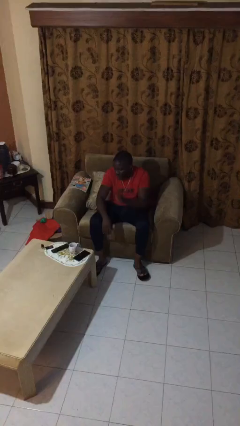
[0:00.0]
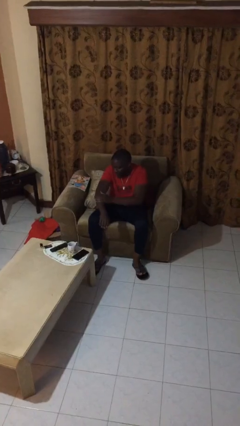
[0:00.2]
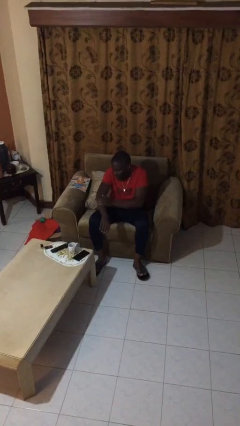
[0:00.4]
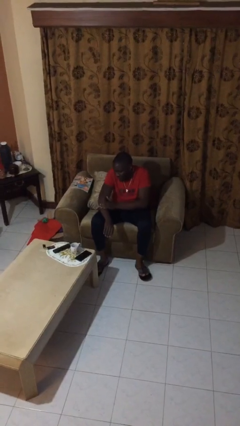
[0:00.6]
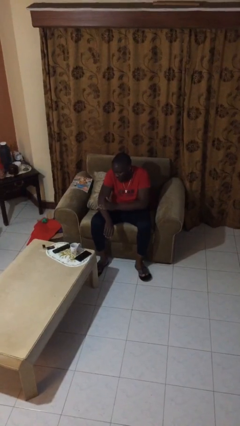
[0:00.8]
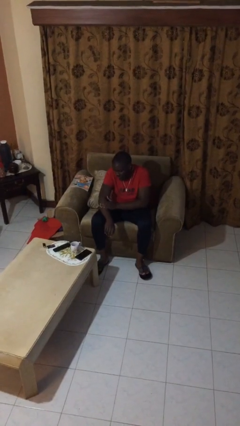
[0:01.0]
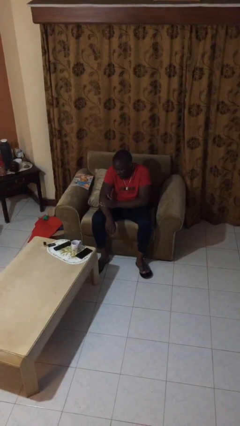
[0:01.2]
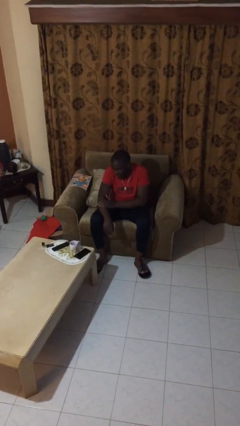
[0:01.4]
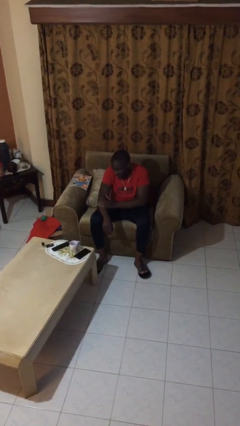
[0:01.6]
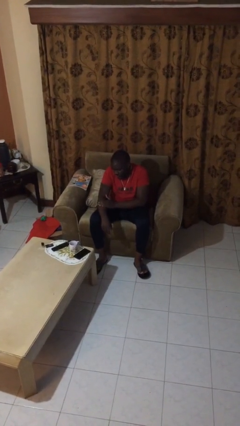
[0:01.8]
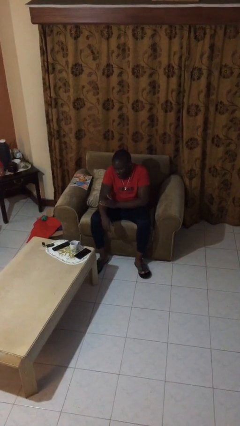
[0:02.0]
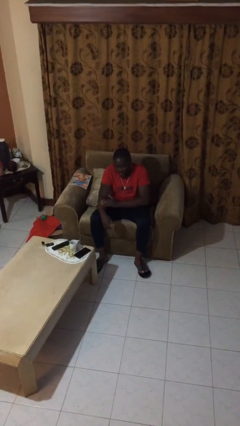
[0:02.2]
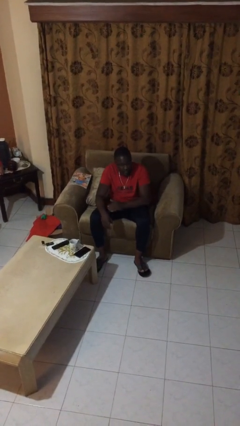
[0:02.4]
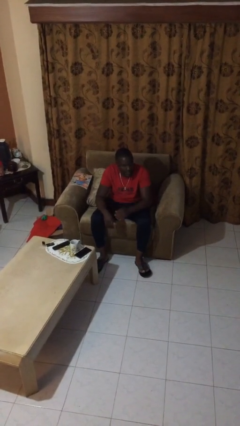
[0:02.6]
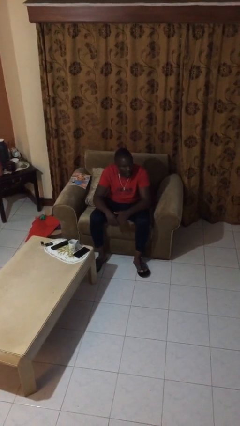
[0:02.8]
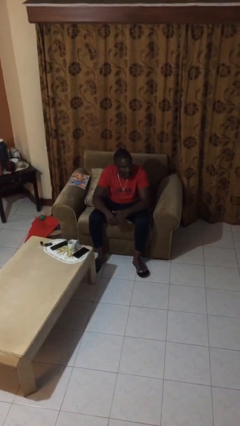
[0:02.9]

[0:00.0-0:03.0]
person swats bug

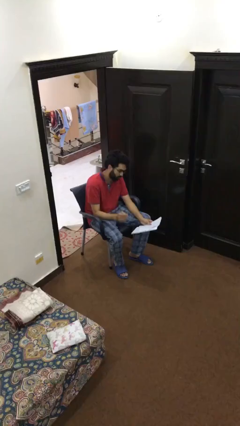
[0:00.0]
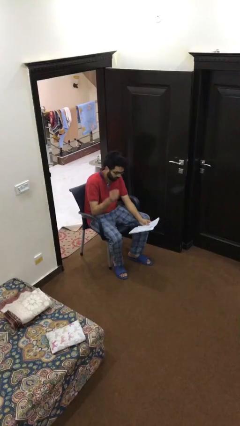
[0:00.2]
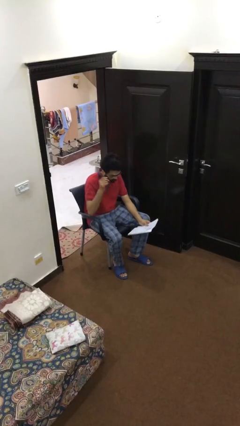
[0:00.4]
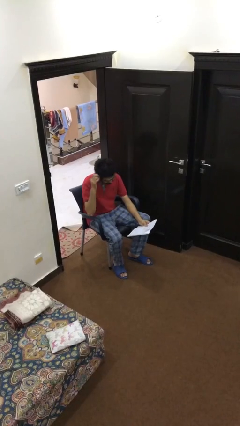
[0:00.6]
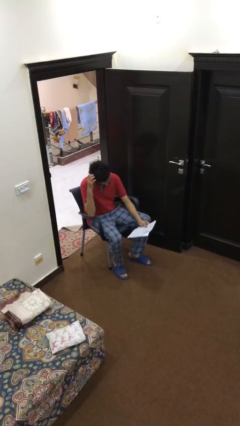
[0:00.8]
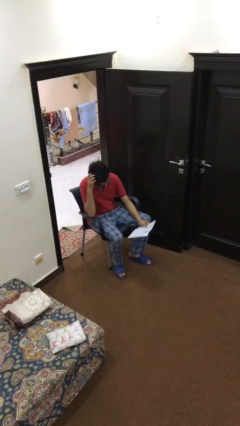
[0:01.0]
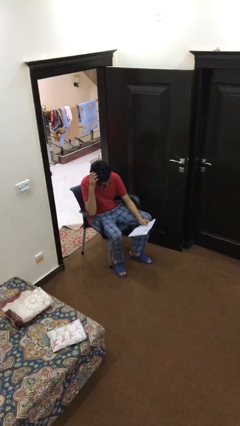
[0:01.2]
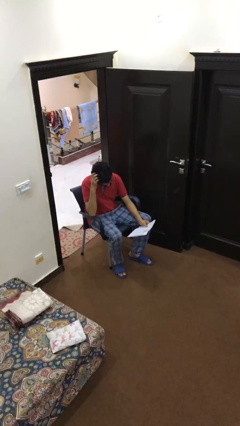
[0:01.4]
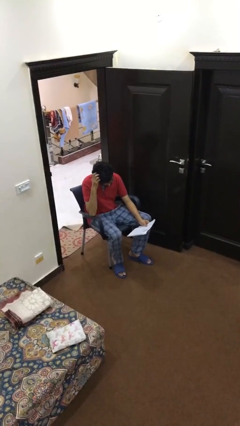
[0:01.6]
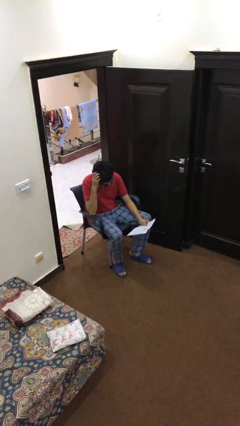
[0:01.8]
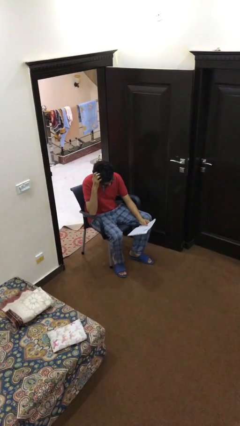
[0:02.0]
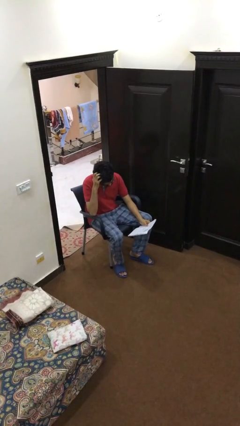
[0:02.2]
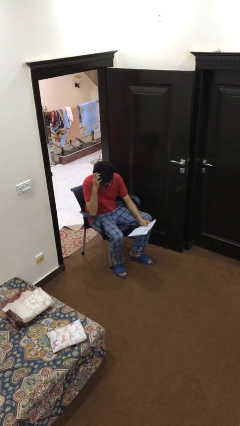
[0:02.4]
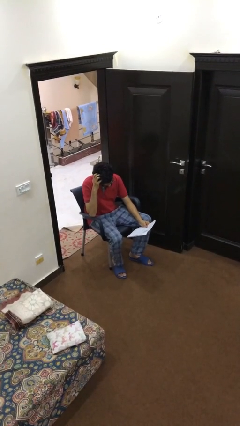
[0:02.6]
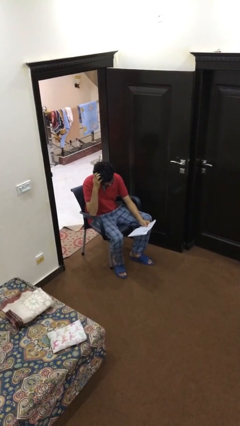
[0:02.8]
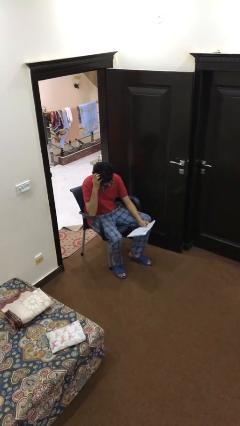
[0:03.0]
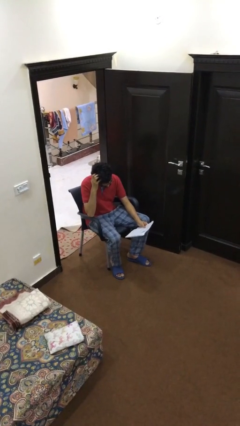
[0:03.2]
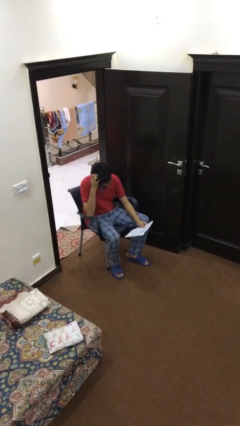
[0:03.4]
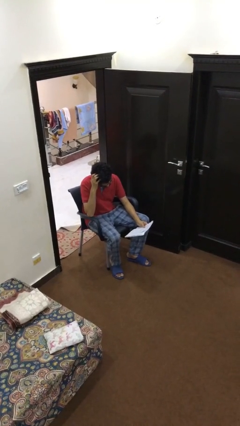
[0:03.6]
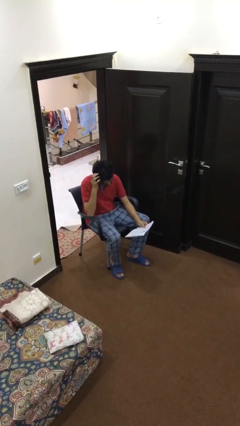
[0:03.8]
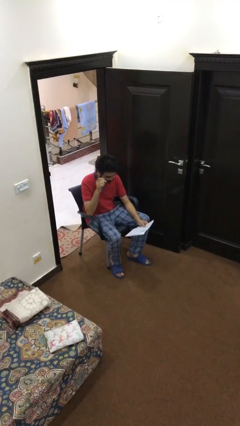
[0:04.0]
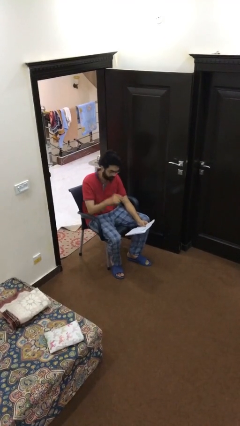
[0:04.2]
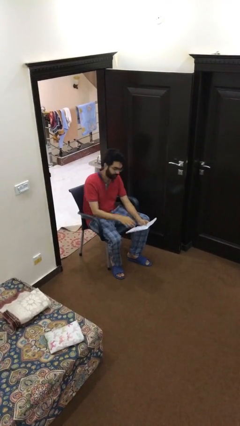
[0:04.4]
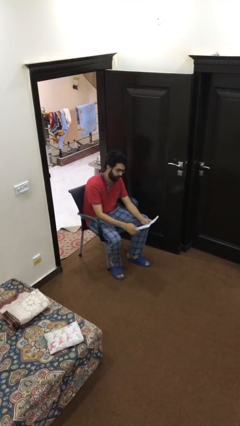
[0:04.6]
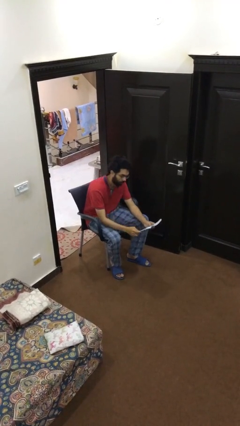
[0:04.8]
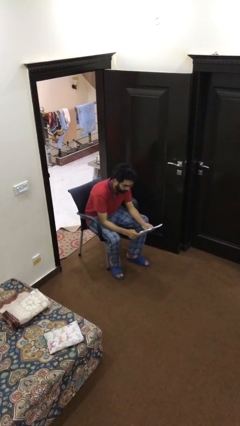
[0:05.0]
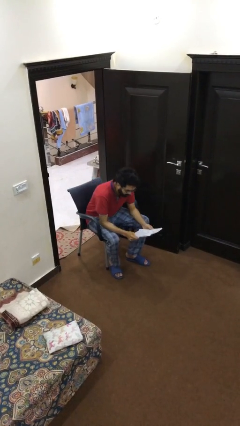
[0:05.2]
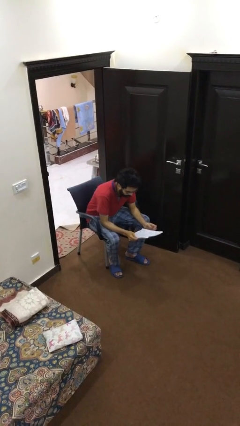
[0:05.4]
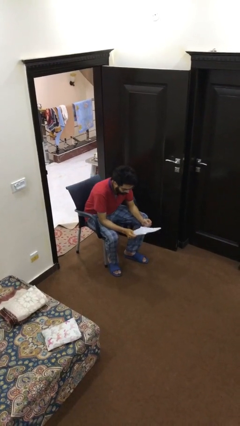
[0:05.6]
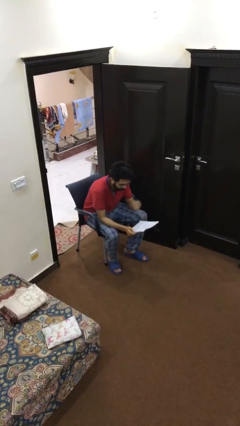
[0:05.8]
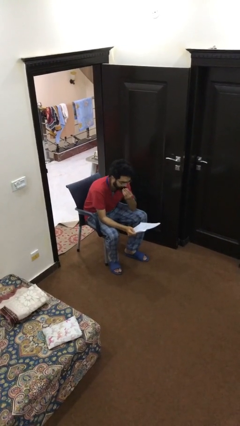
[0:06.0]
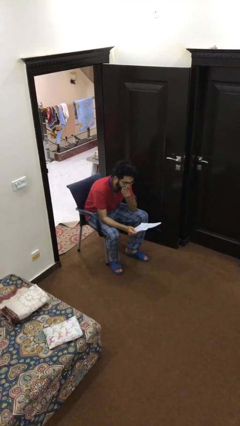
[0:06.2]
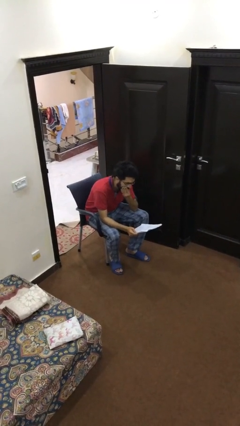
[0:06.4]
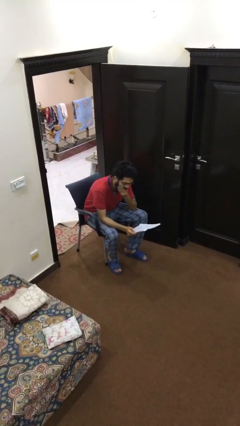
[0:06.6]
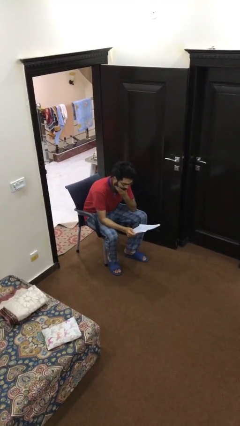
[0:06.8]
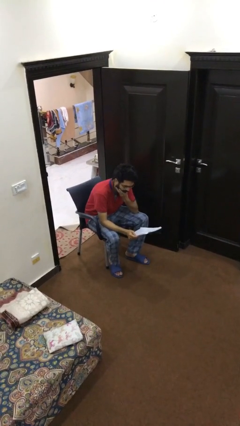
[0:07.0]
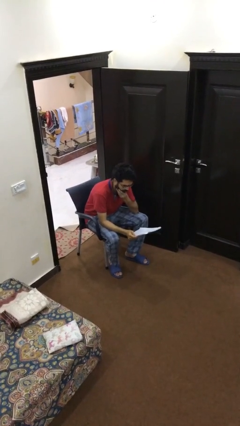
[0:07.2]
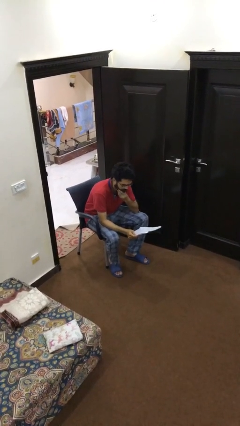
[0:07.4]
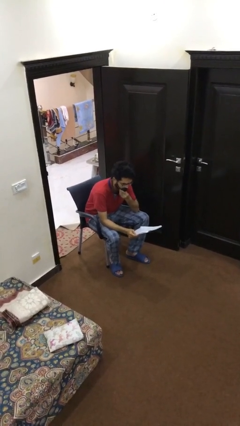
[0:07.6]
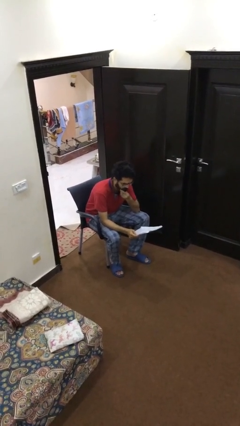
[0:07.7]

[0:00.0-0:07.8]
person reads document

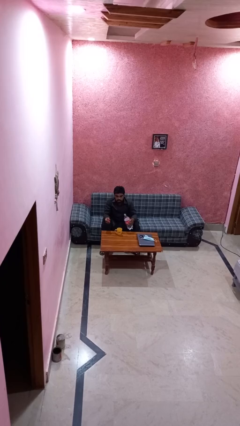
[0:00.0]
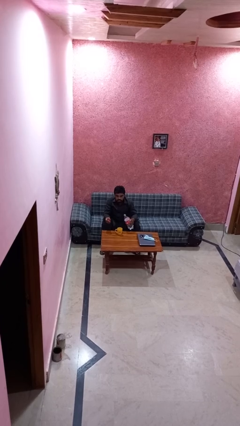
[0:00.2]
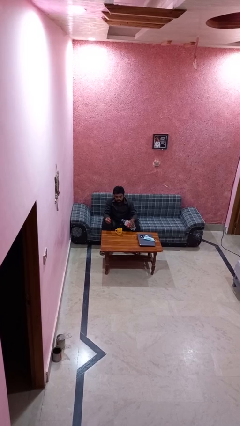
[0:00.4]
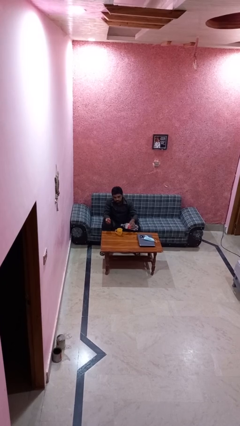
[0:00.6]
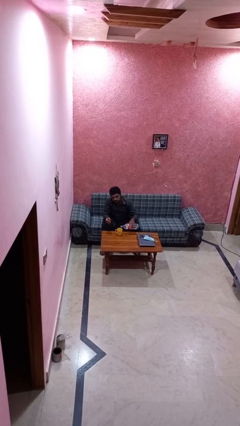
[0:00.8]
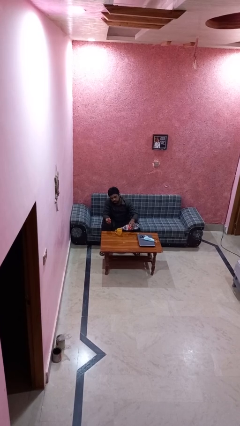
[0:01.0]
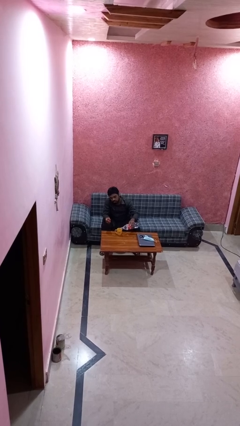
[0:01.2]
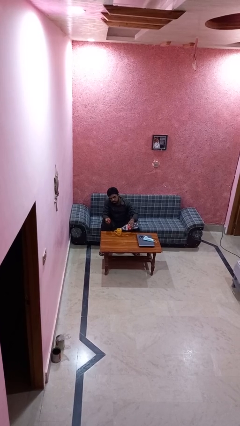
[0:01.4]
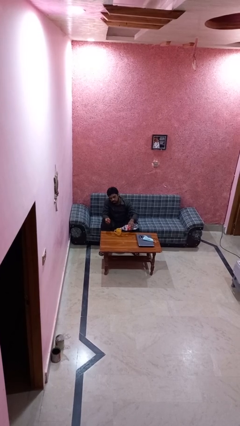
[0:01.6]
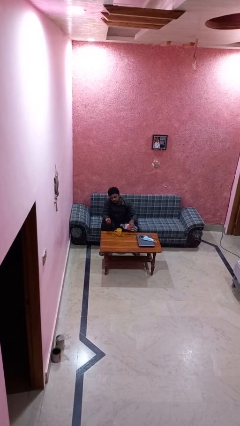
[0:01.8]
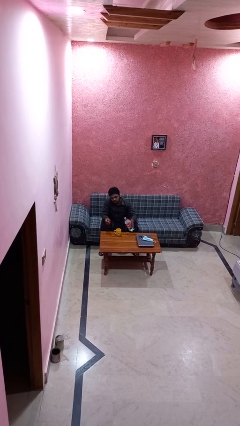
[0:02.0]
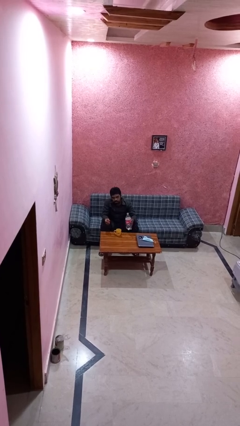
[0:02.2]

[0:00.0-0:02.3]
person pours liquid into cup

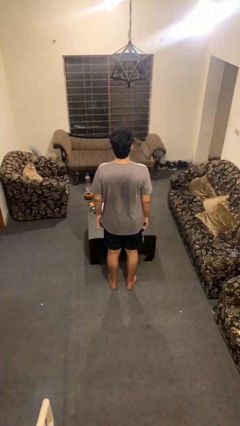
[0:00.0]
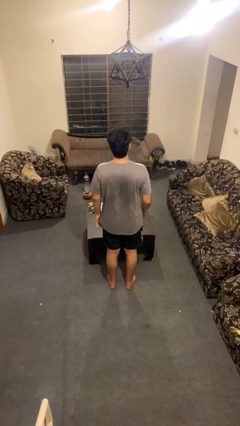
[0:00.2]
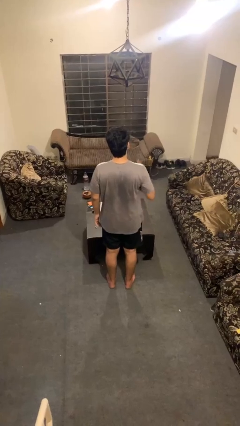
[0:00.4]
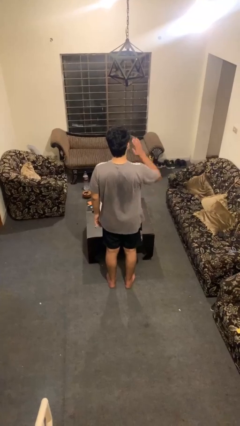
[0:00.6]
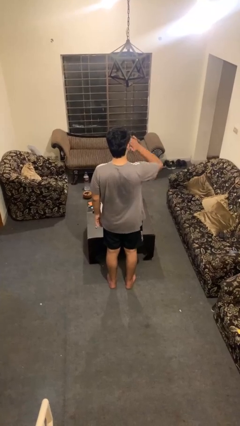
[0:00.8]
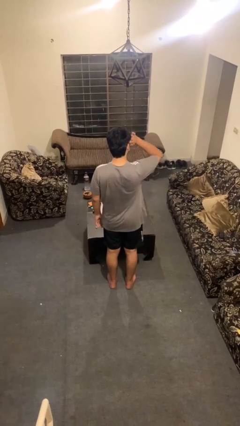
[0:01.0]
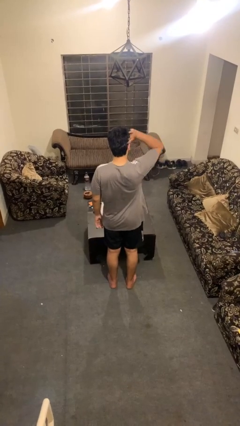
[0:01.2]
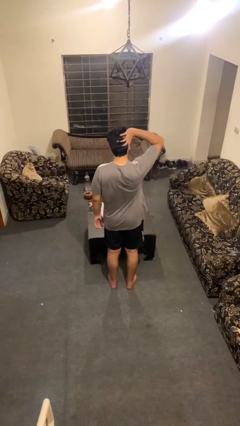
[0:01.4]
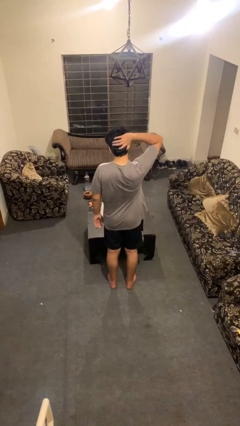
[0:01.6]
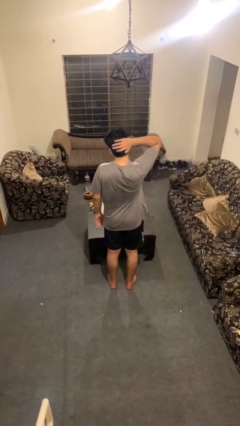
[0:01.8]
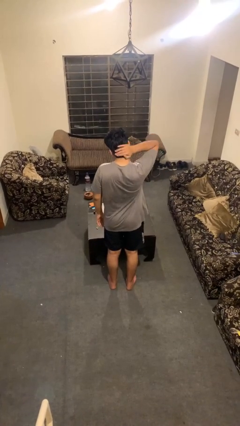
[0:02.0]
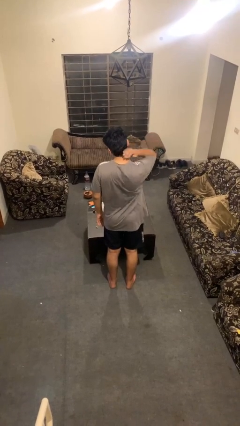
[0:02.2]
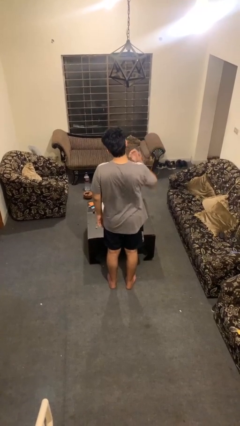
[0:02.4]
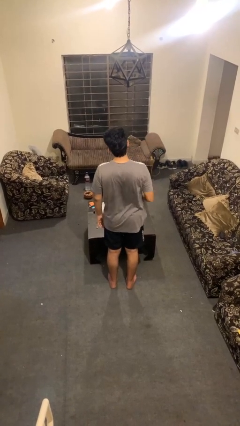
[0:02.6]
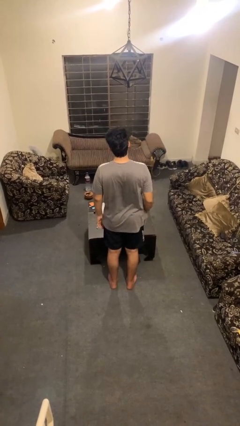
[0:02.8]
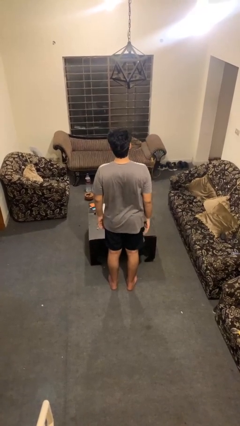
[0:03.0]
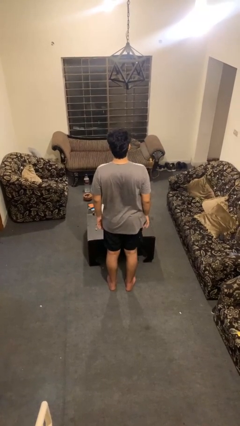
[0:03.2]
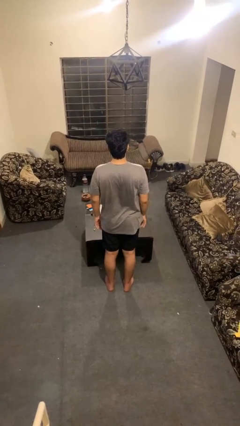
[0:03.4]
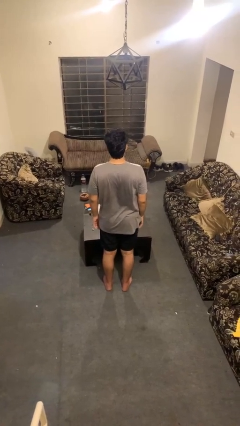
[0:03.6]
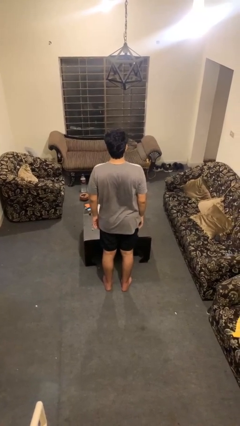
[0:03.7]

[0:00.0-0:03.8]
person strokes hair

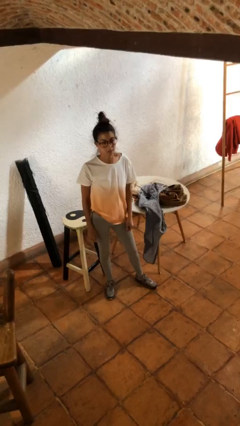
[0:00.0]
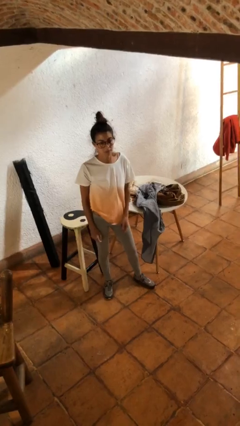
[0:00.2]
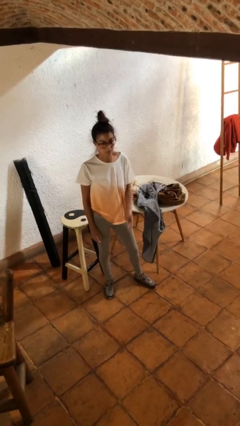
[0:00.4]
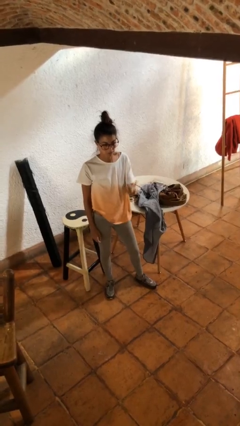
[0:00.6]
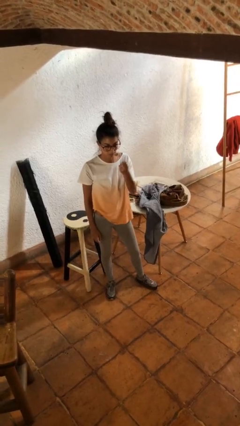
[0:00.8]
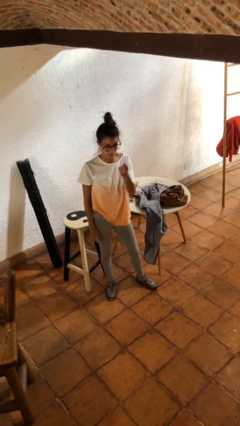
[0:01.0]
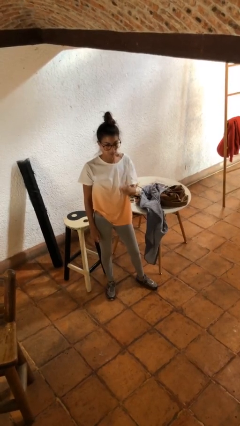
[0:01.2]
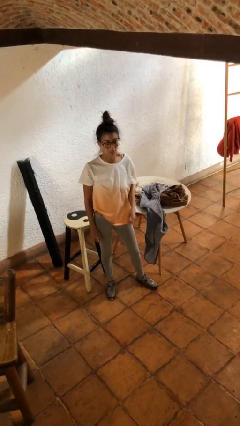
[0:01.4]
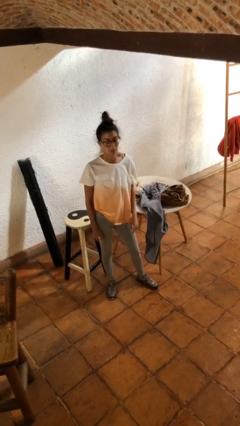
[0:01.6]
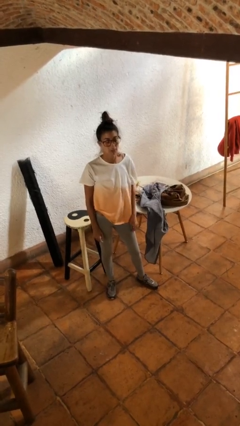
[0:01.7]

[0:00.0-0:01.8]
person gestures swipe up
